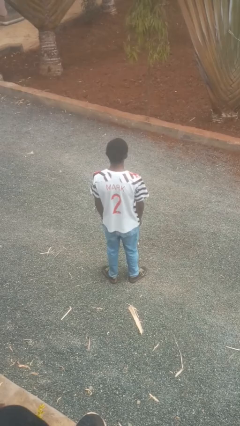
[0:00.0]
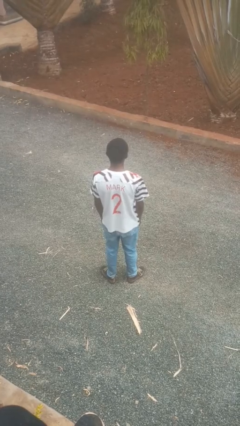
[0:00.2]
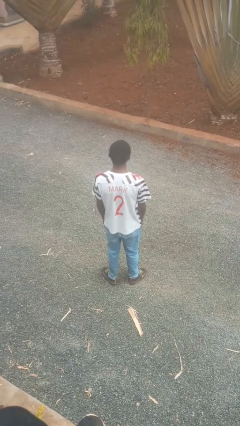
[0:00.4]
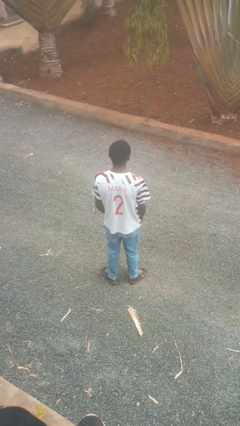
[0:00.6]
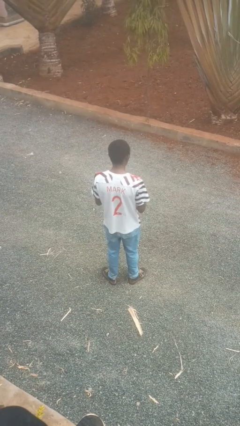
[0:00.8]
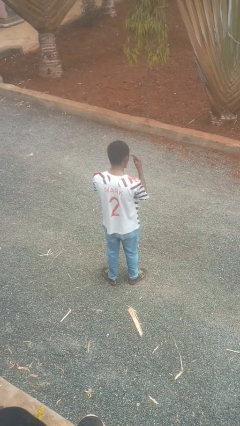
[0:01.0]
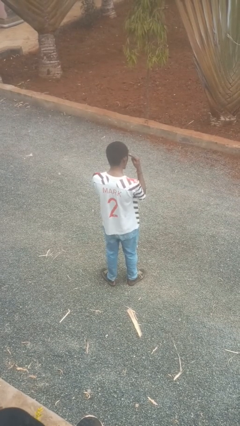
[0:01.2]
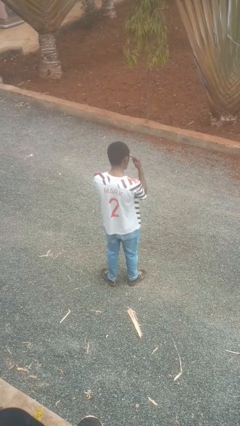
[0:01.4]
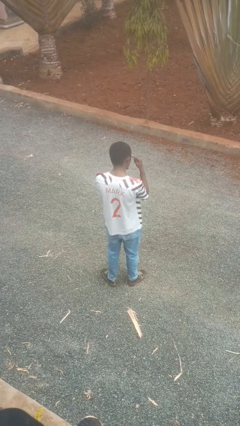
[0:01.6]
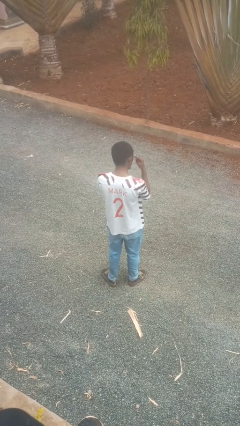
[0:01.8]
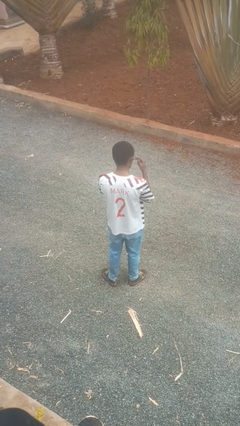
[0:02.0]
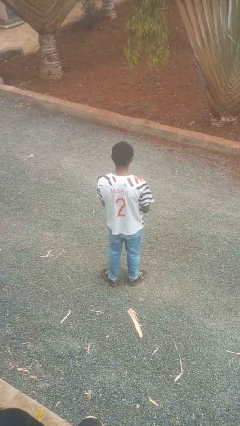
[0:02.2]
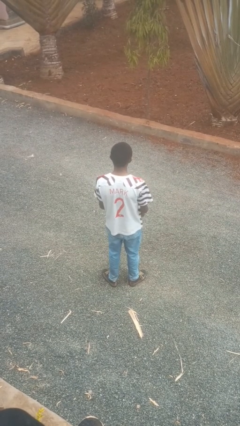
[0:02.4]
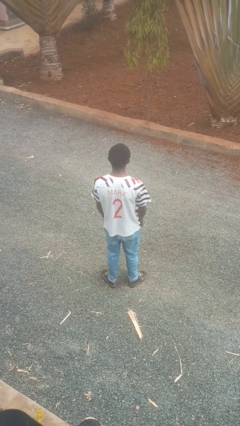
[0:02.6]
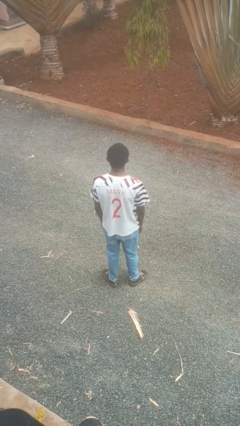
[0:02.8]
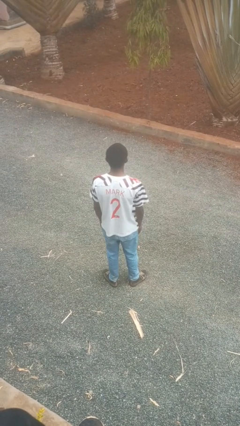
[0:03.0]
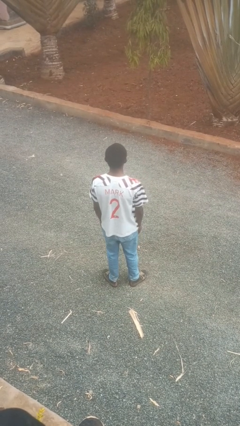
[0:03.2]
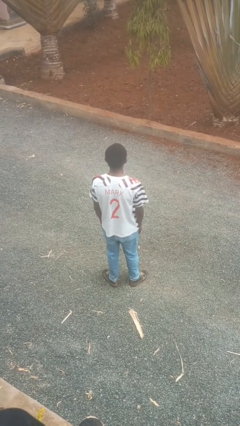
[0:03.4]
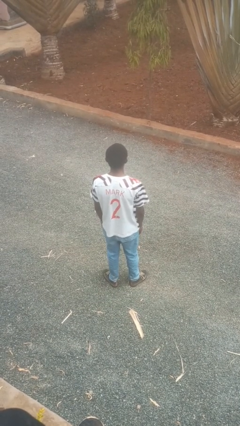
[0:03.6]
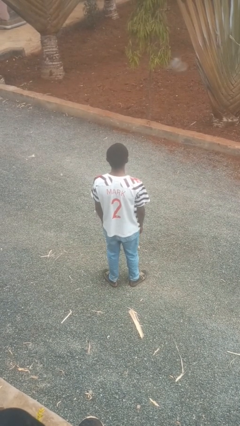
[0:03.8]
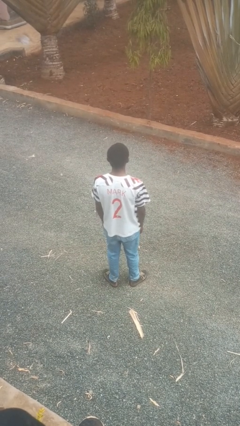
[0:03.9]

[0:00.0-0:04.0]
person gestures watch closely

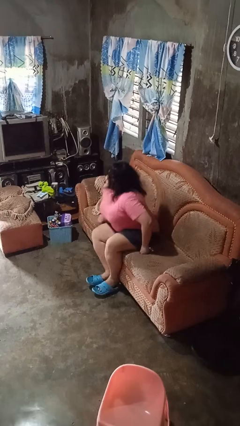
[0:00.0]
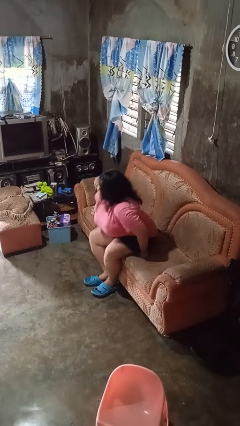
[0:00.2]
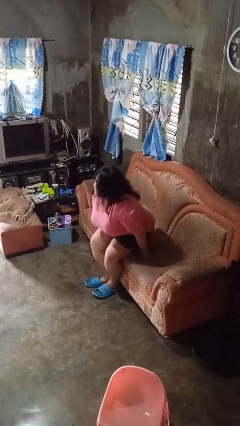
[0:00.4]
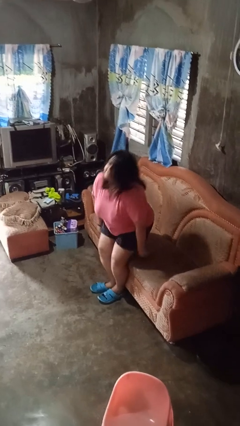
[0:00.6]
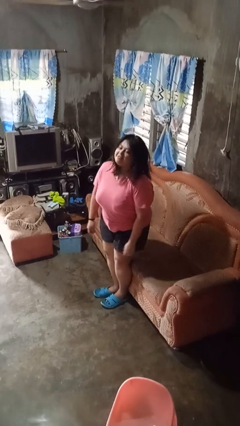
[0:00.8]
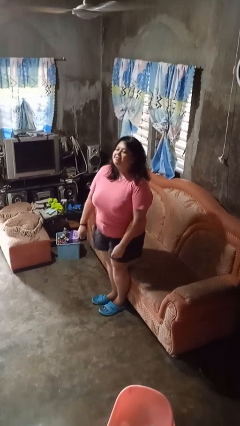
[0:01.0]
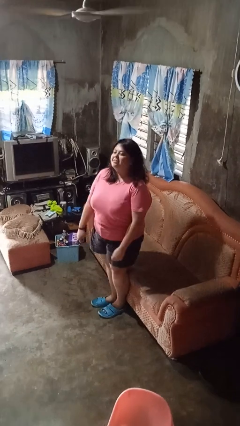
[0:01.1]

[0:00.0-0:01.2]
person stands up

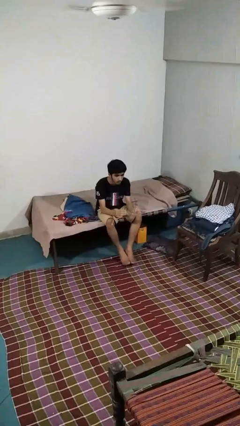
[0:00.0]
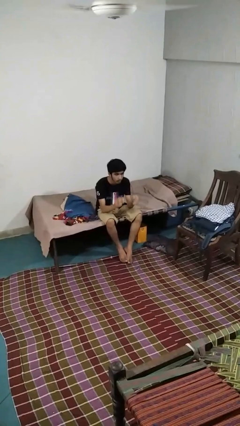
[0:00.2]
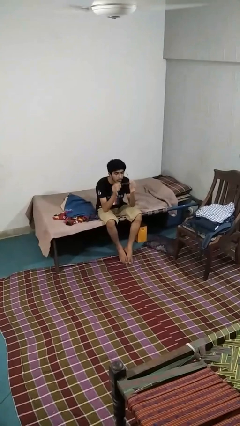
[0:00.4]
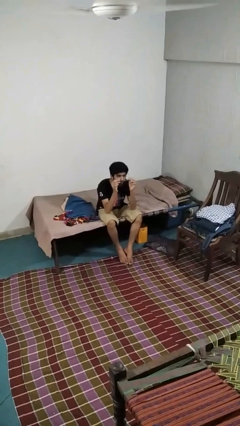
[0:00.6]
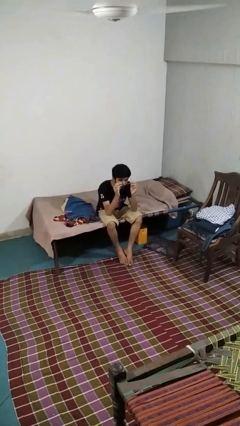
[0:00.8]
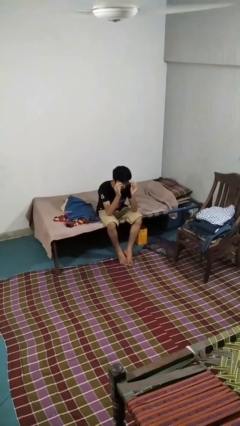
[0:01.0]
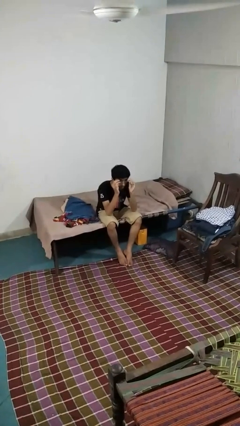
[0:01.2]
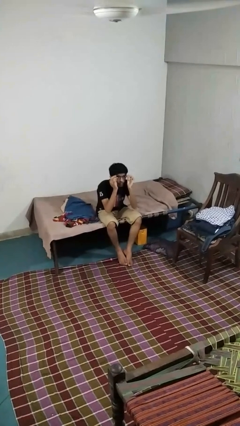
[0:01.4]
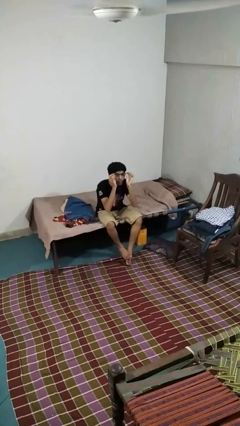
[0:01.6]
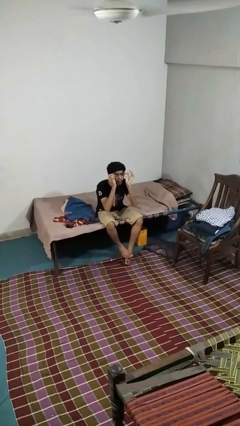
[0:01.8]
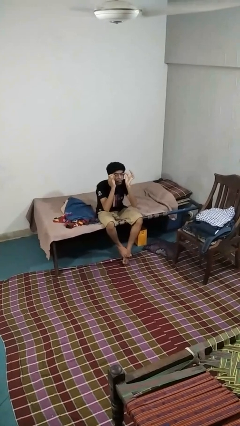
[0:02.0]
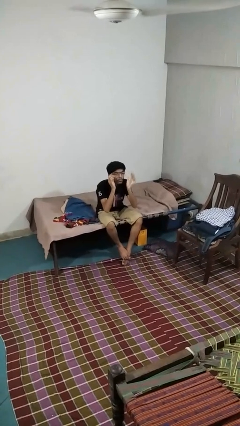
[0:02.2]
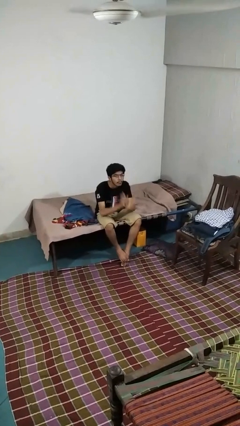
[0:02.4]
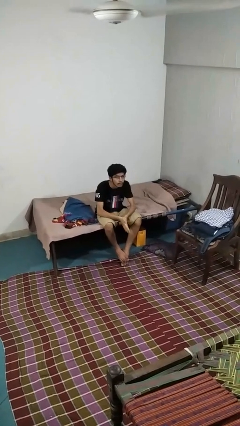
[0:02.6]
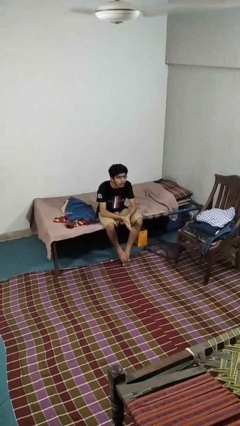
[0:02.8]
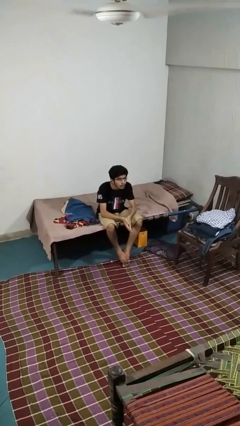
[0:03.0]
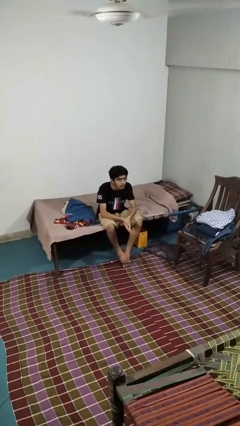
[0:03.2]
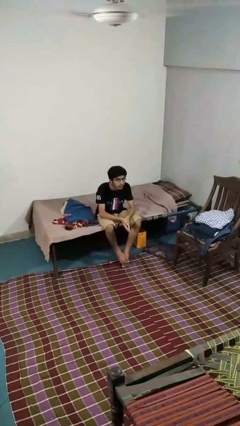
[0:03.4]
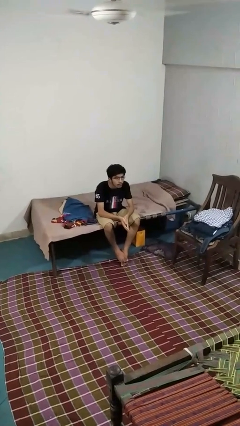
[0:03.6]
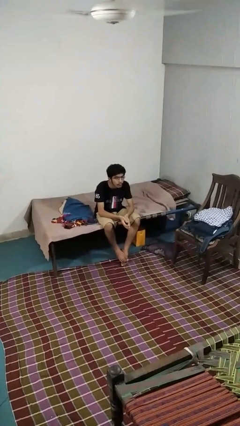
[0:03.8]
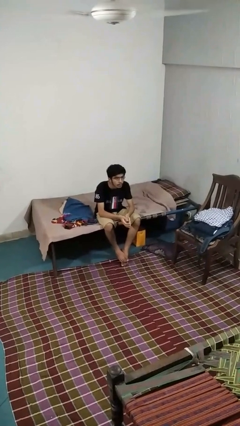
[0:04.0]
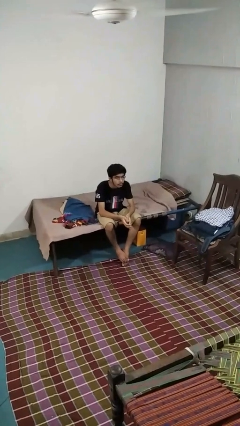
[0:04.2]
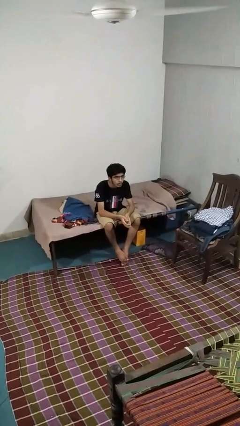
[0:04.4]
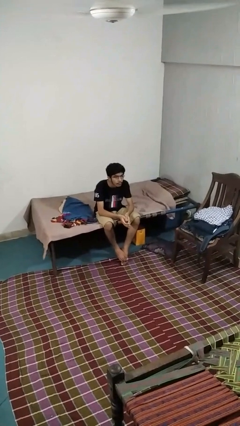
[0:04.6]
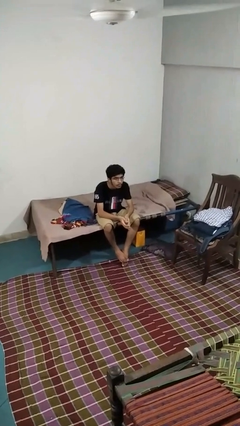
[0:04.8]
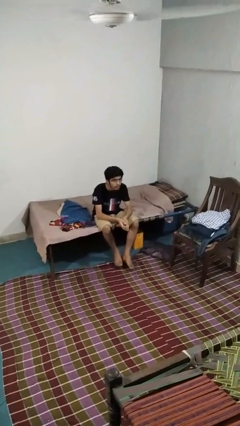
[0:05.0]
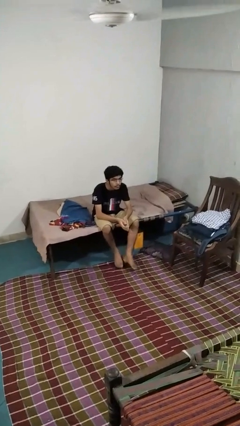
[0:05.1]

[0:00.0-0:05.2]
person puts on glasses

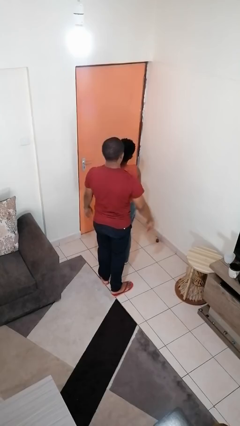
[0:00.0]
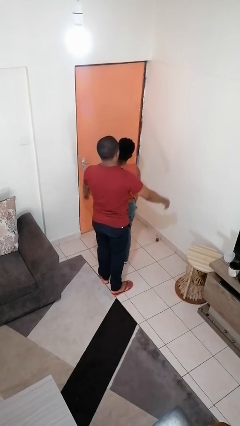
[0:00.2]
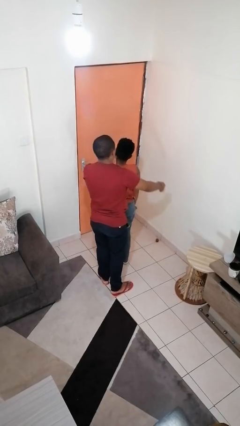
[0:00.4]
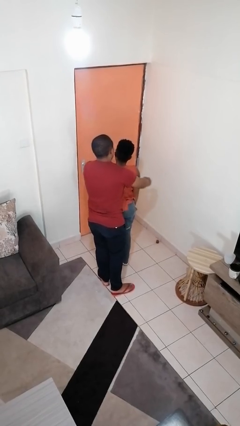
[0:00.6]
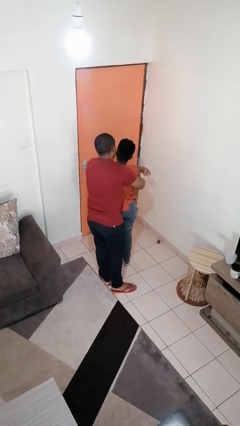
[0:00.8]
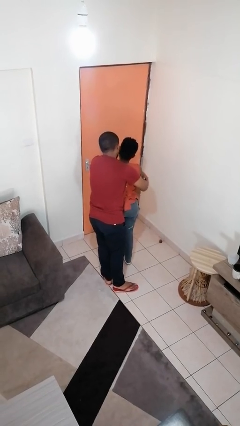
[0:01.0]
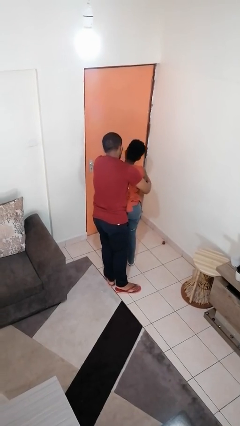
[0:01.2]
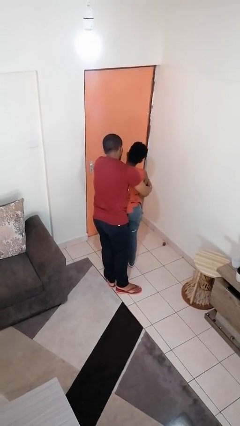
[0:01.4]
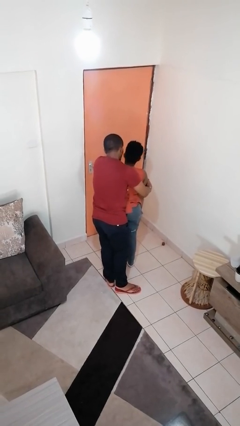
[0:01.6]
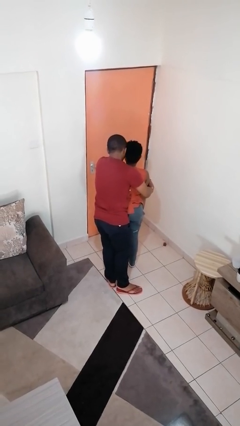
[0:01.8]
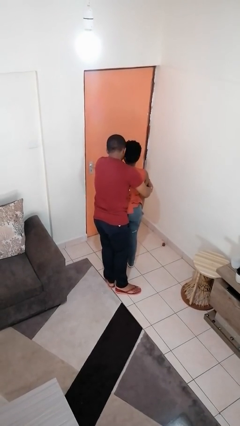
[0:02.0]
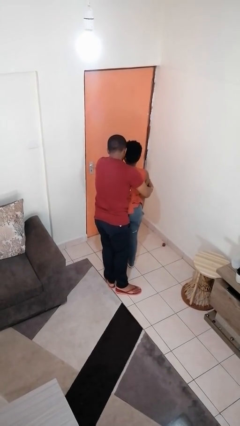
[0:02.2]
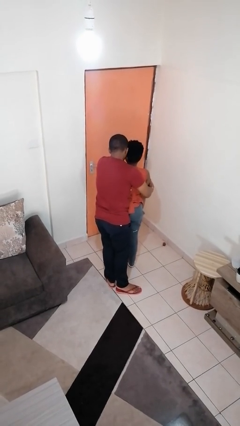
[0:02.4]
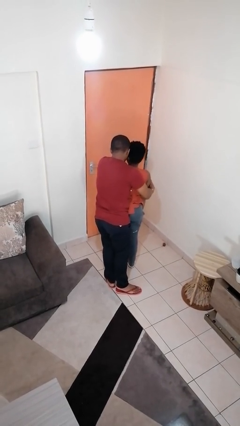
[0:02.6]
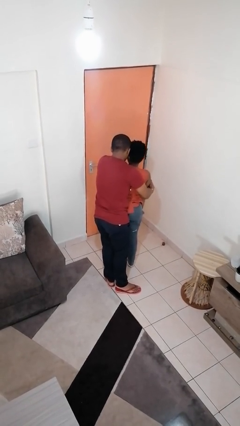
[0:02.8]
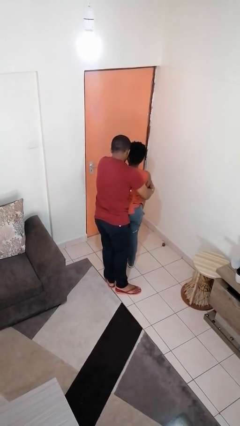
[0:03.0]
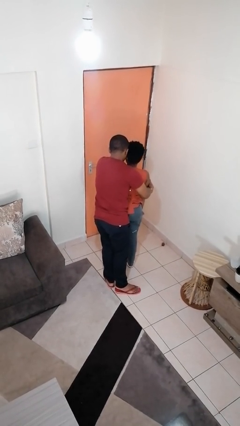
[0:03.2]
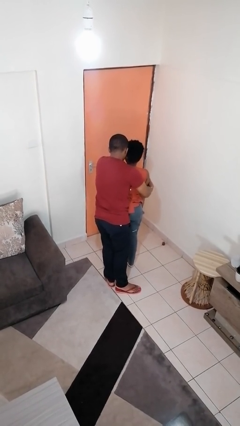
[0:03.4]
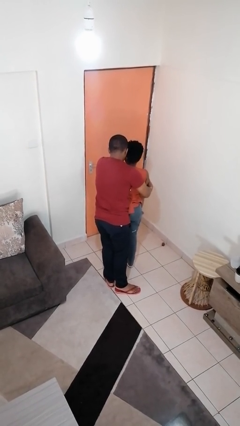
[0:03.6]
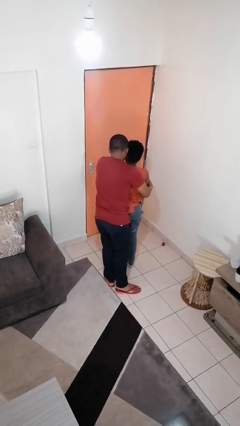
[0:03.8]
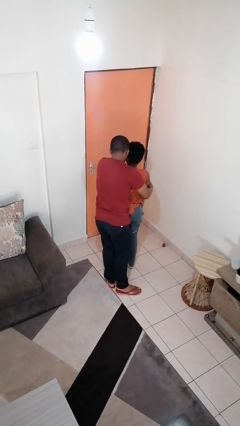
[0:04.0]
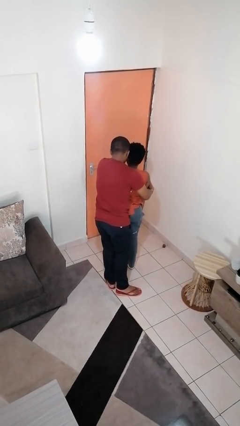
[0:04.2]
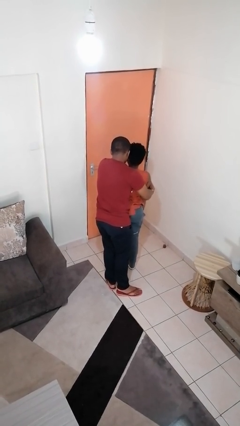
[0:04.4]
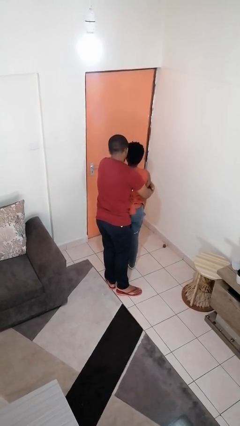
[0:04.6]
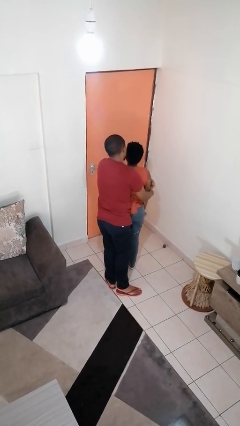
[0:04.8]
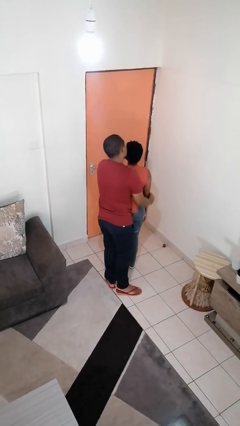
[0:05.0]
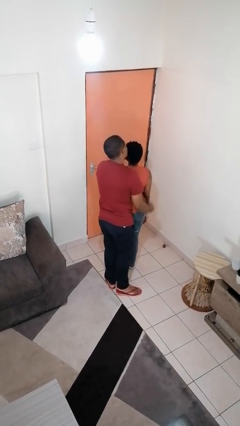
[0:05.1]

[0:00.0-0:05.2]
person hugs person from behind

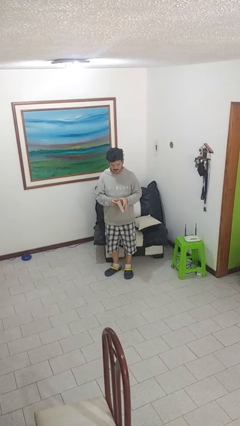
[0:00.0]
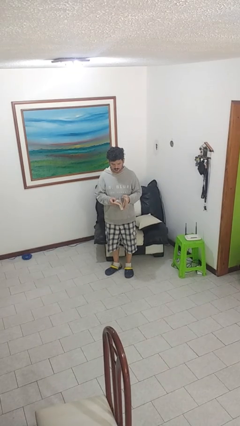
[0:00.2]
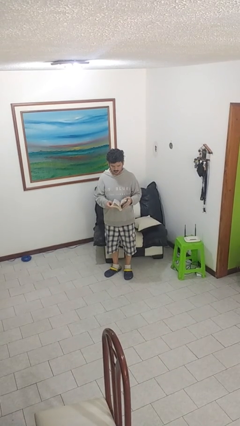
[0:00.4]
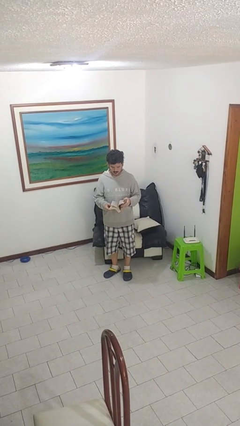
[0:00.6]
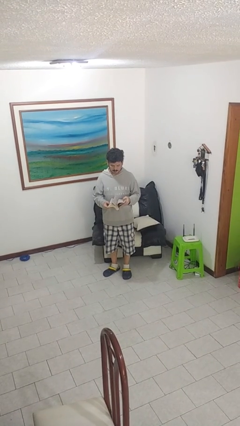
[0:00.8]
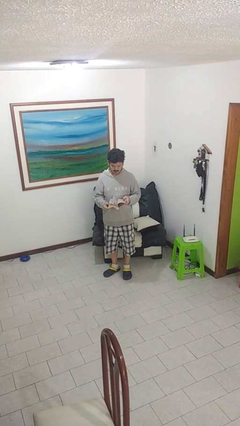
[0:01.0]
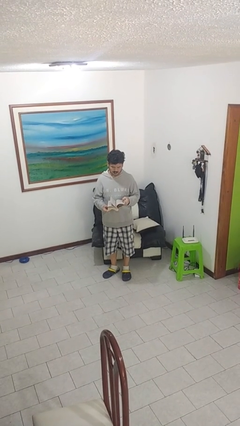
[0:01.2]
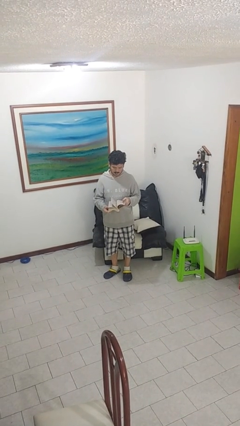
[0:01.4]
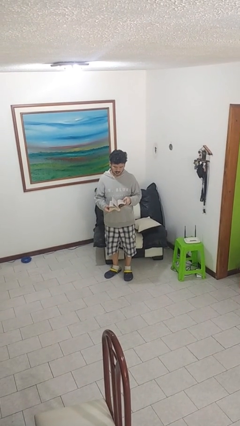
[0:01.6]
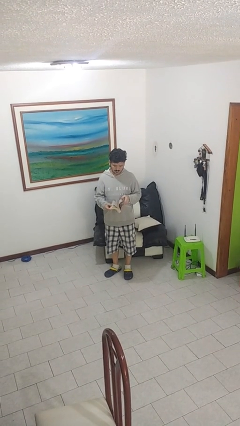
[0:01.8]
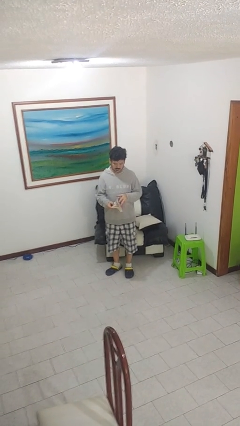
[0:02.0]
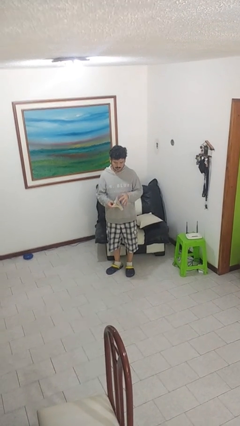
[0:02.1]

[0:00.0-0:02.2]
person reads book

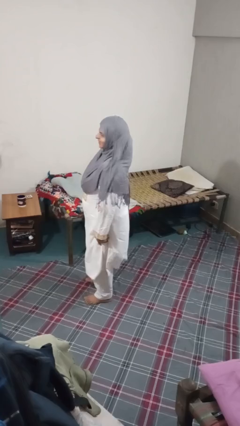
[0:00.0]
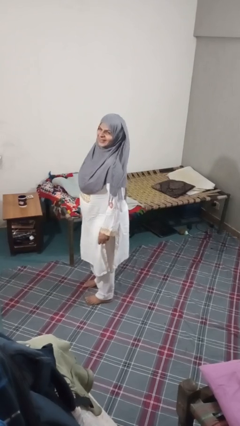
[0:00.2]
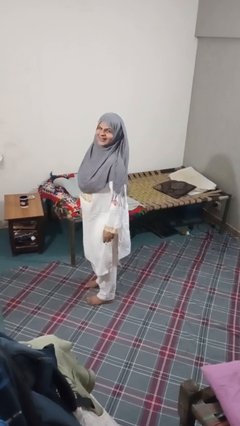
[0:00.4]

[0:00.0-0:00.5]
person twirls
